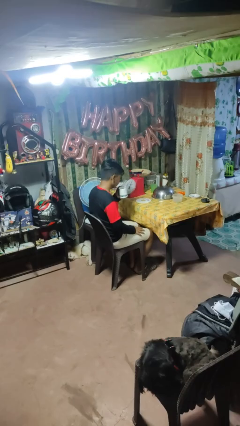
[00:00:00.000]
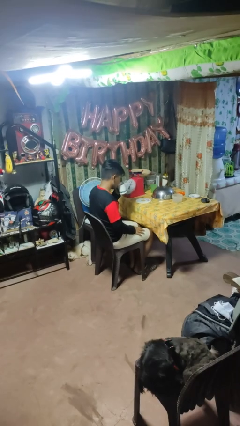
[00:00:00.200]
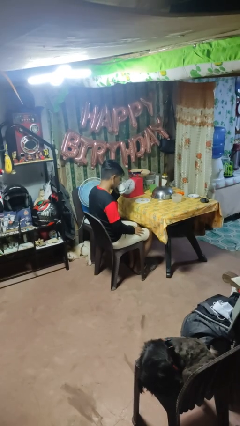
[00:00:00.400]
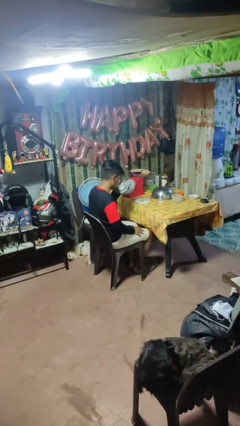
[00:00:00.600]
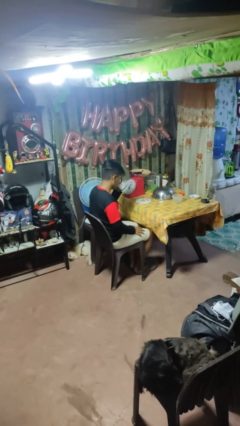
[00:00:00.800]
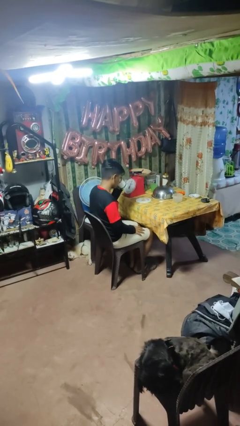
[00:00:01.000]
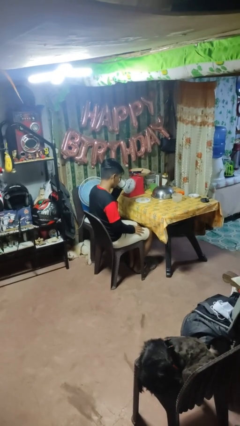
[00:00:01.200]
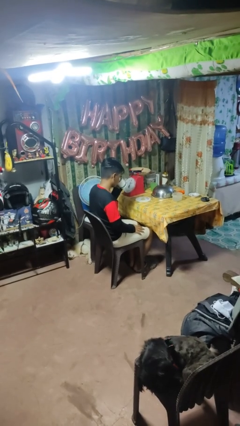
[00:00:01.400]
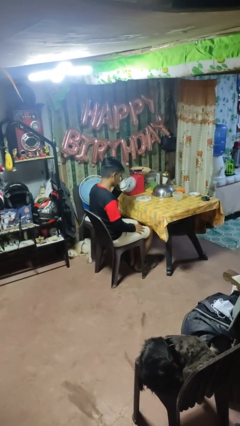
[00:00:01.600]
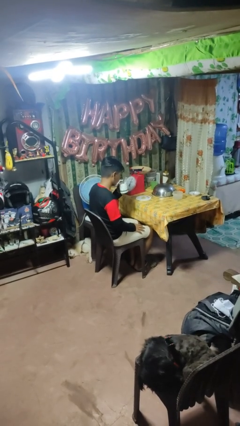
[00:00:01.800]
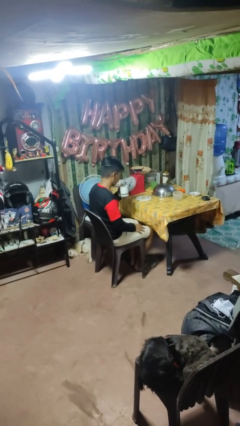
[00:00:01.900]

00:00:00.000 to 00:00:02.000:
person drinks from mug

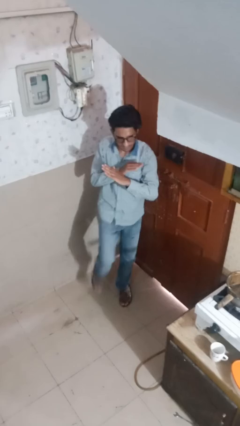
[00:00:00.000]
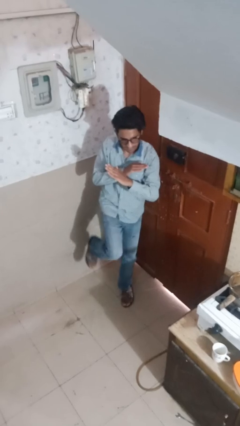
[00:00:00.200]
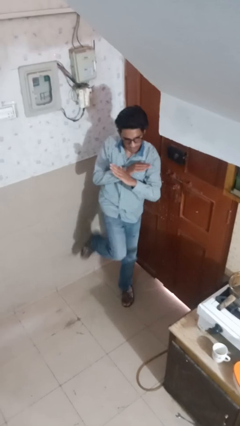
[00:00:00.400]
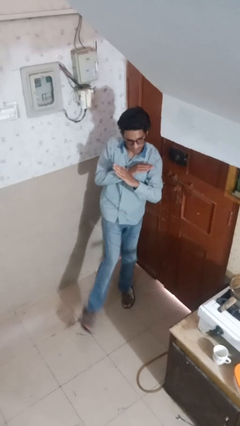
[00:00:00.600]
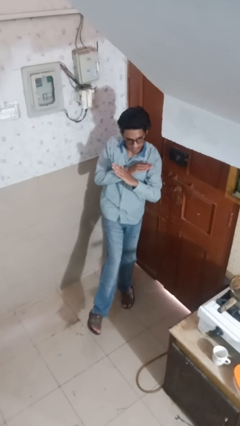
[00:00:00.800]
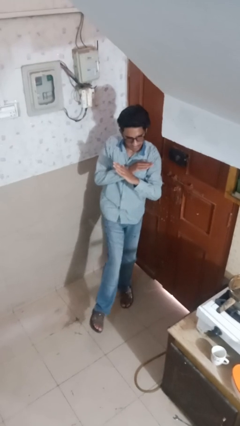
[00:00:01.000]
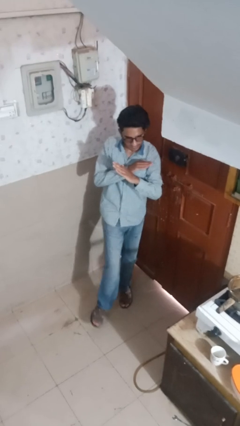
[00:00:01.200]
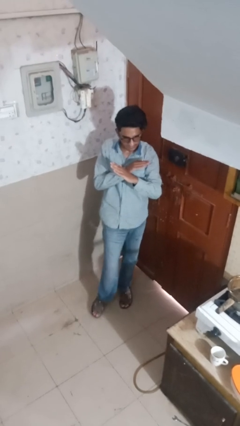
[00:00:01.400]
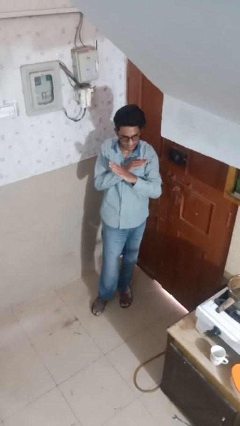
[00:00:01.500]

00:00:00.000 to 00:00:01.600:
person karate kicks

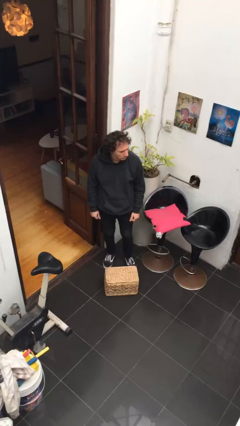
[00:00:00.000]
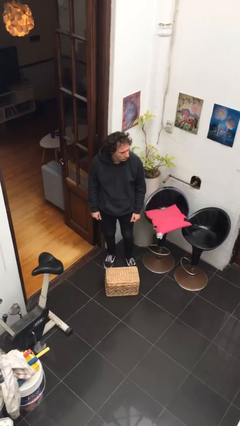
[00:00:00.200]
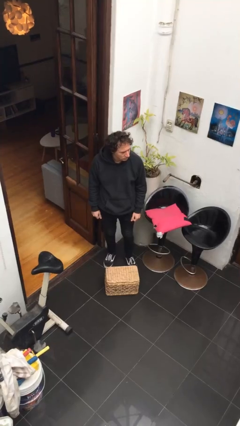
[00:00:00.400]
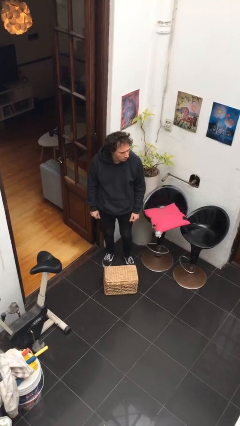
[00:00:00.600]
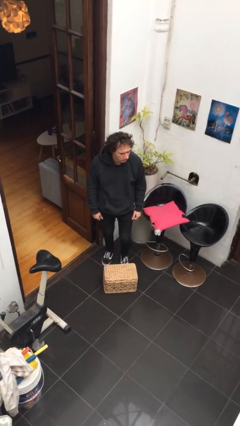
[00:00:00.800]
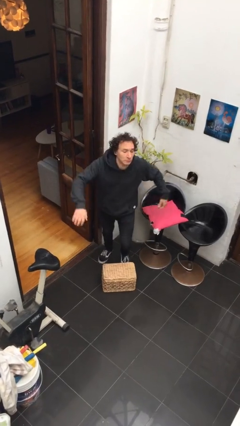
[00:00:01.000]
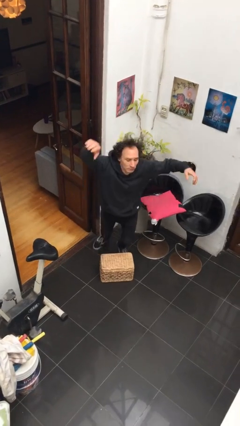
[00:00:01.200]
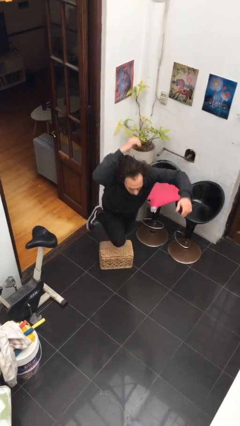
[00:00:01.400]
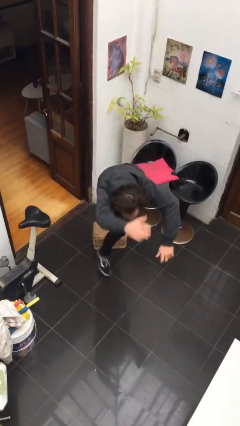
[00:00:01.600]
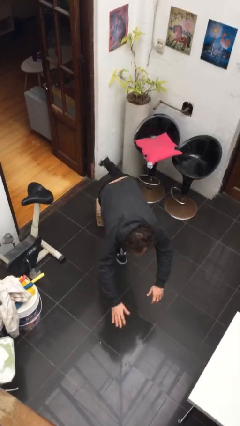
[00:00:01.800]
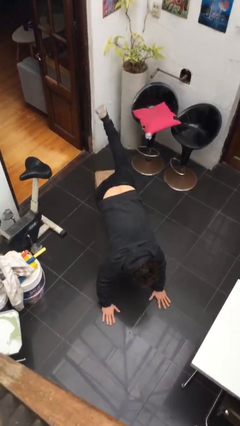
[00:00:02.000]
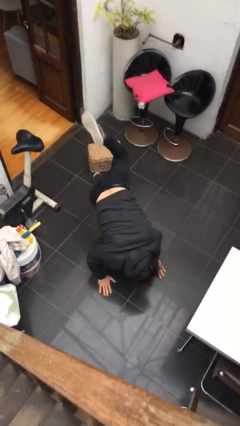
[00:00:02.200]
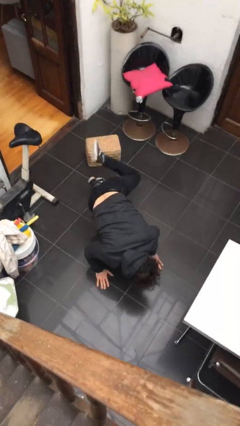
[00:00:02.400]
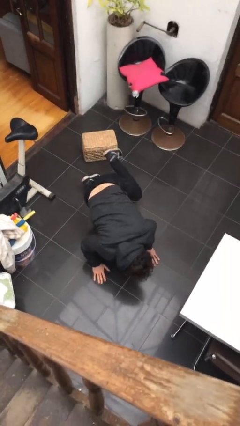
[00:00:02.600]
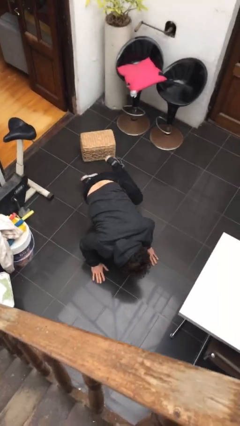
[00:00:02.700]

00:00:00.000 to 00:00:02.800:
person trips on object on floor

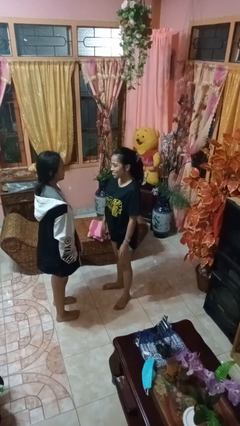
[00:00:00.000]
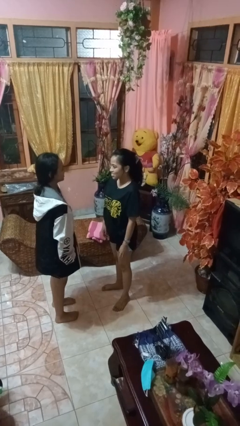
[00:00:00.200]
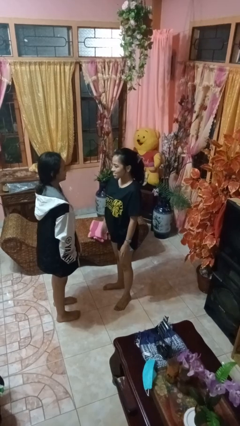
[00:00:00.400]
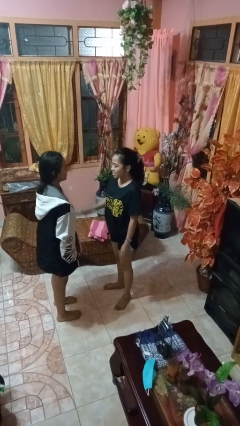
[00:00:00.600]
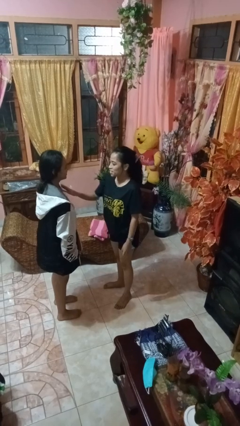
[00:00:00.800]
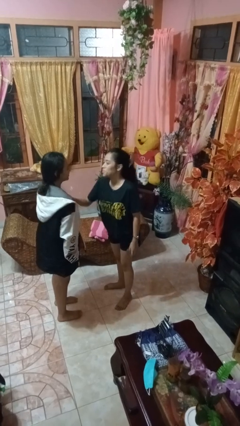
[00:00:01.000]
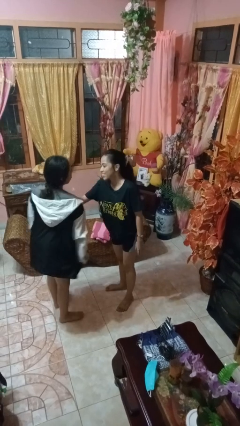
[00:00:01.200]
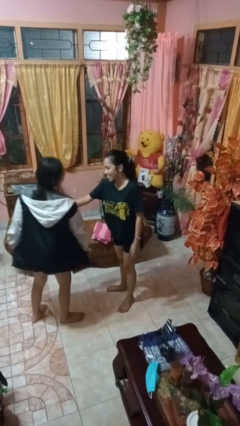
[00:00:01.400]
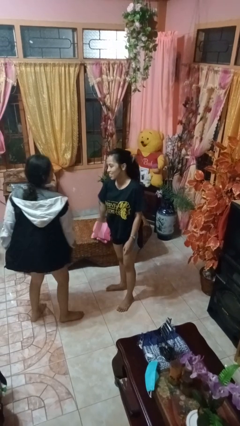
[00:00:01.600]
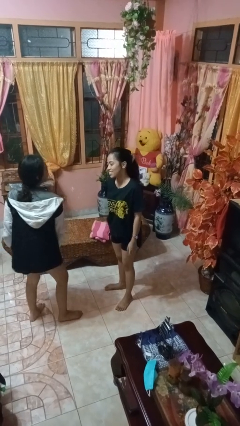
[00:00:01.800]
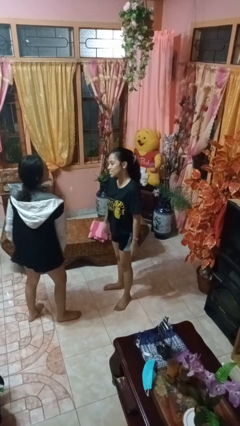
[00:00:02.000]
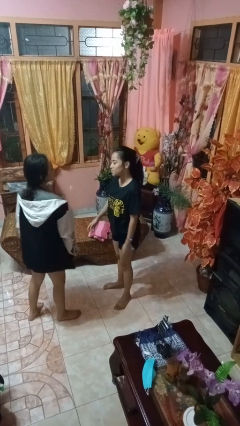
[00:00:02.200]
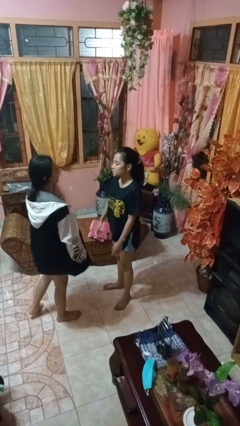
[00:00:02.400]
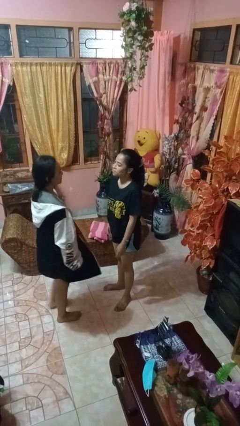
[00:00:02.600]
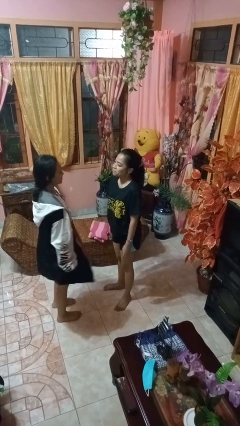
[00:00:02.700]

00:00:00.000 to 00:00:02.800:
person shoves person

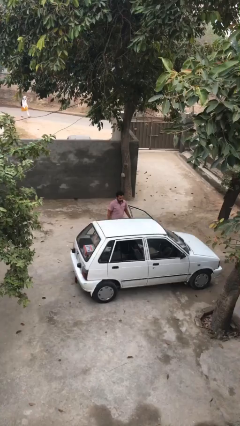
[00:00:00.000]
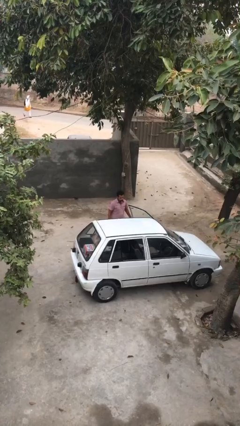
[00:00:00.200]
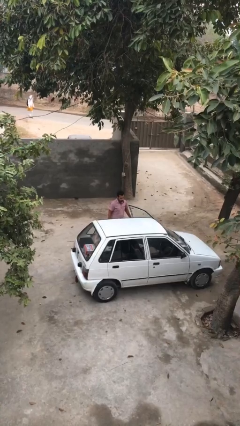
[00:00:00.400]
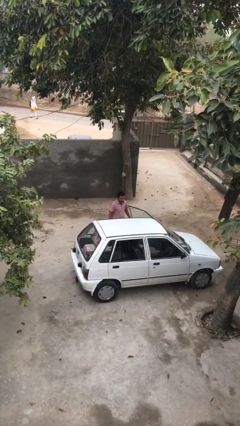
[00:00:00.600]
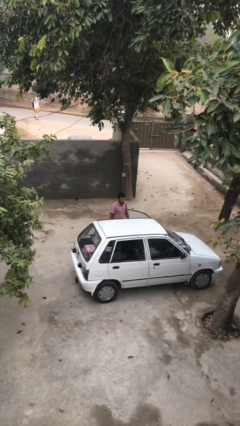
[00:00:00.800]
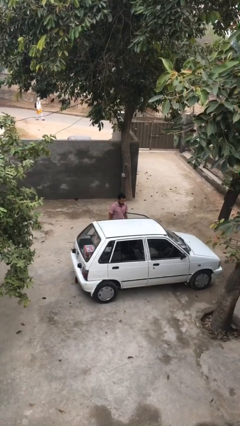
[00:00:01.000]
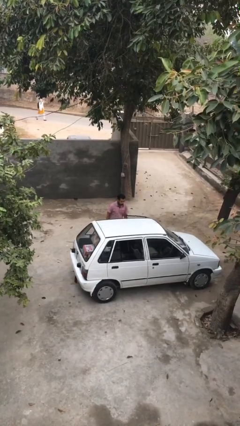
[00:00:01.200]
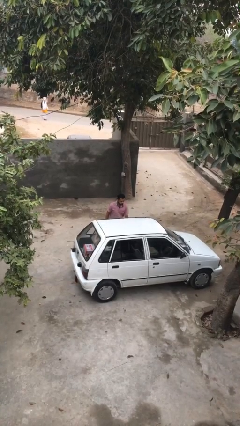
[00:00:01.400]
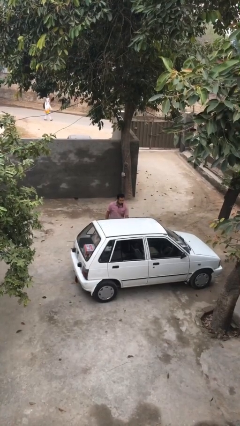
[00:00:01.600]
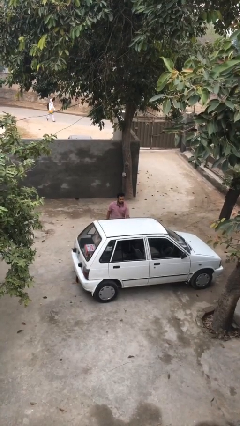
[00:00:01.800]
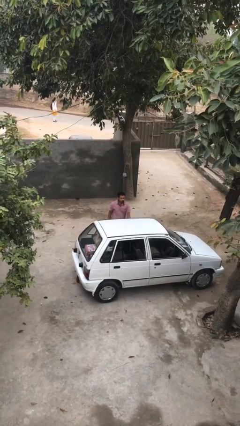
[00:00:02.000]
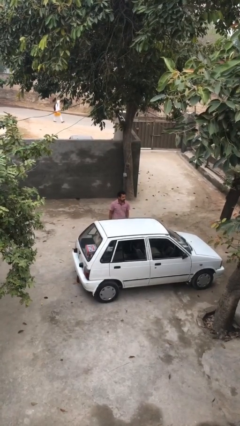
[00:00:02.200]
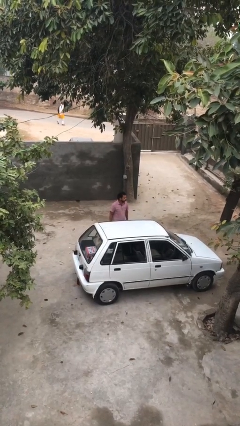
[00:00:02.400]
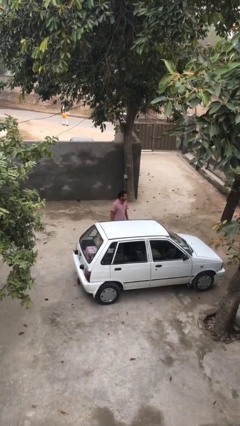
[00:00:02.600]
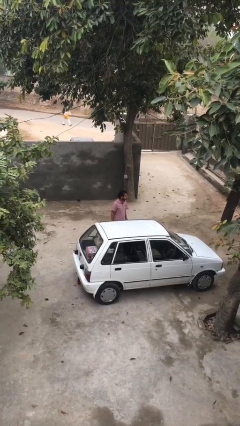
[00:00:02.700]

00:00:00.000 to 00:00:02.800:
person closes car door

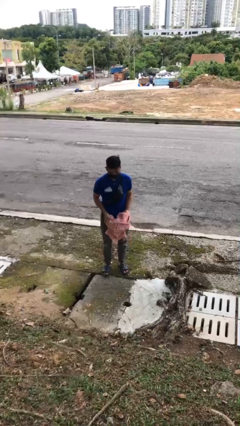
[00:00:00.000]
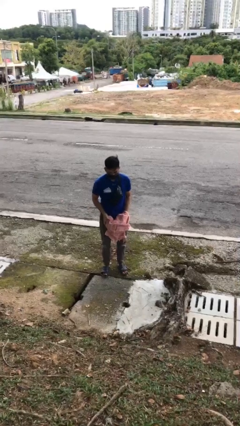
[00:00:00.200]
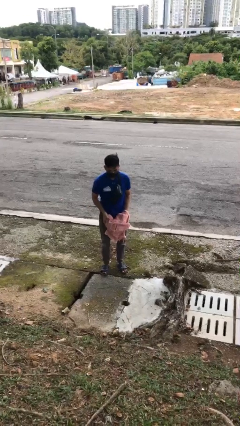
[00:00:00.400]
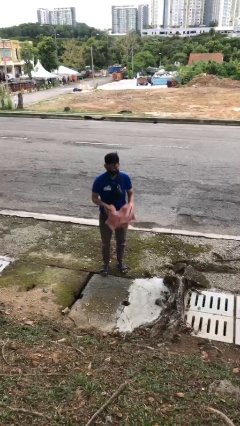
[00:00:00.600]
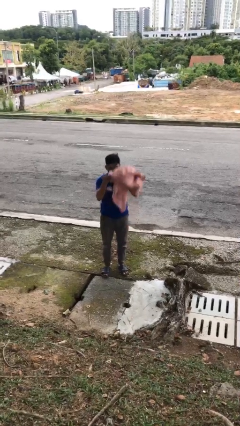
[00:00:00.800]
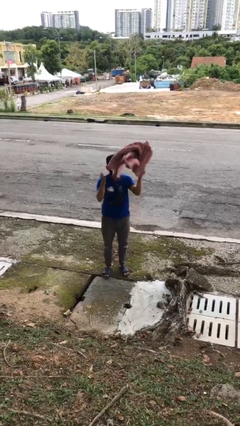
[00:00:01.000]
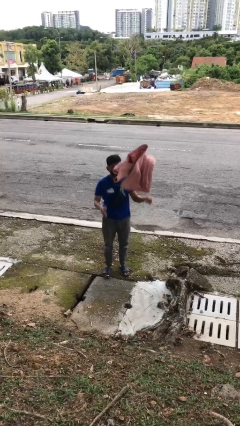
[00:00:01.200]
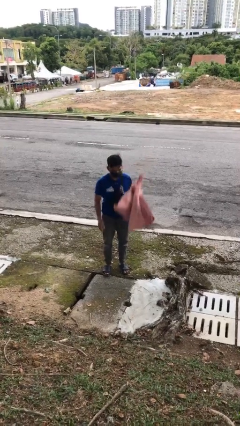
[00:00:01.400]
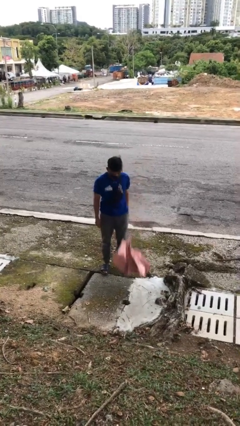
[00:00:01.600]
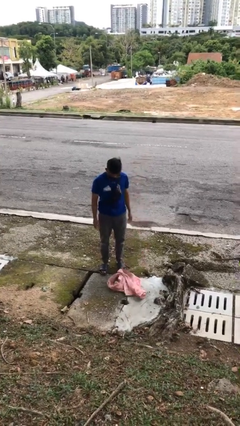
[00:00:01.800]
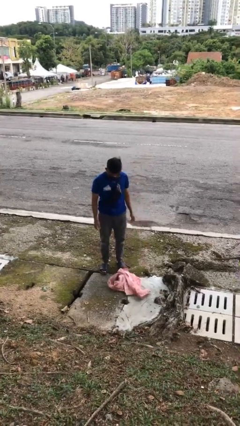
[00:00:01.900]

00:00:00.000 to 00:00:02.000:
person throws object into air

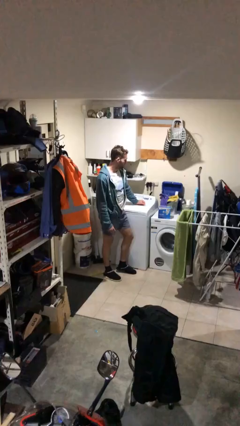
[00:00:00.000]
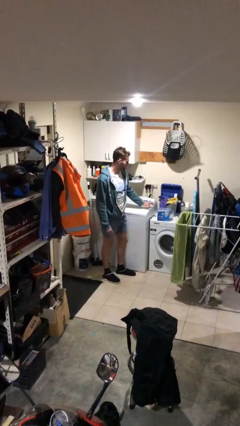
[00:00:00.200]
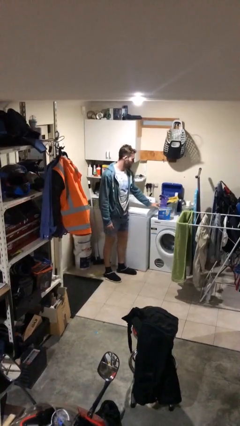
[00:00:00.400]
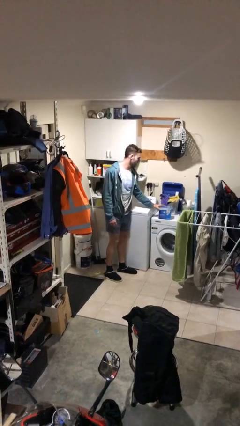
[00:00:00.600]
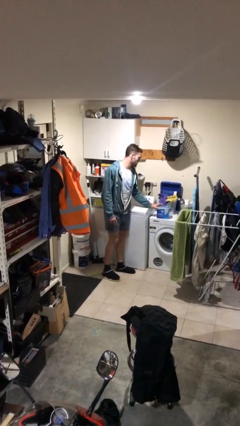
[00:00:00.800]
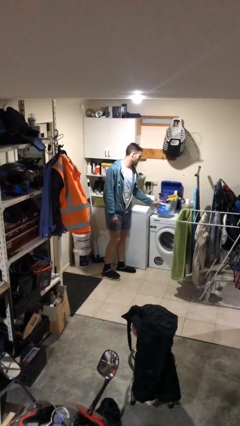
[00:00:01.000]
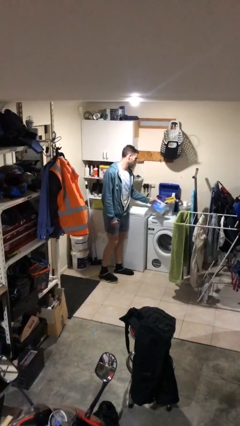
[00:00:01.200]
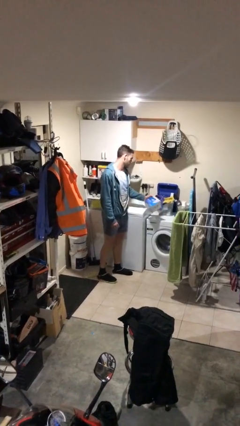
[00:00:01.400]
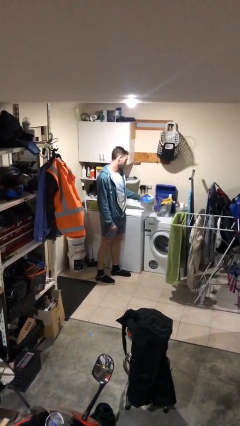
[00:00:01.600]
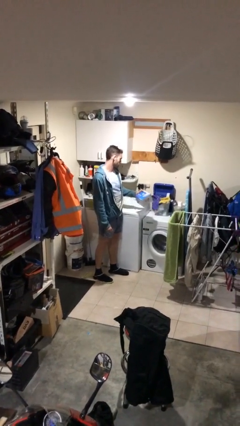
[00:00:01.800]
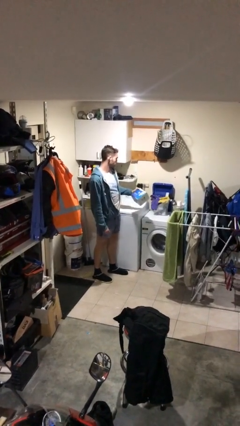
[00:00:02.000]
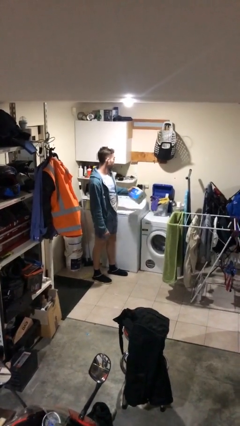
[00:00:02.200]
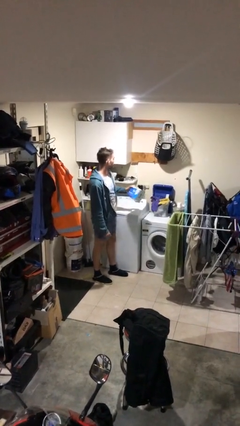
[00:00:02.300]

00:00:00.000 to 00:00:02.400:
person picks up object from table

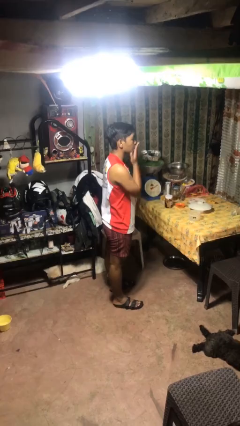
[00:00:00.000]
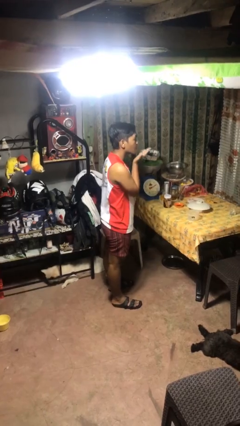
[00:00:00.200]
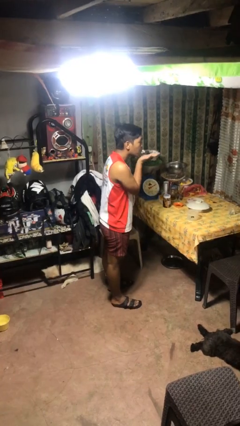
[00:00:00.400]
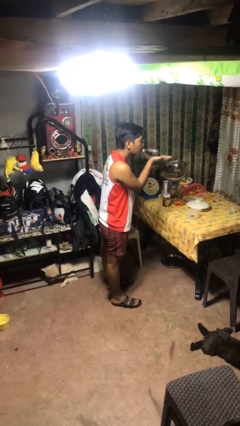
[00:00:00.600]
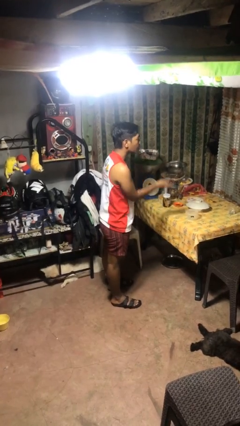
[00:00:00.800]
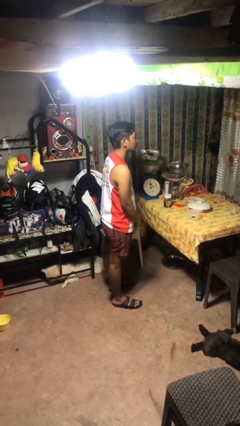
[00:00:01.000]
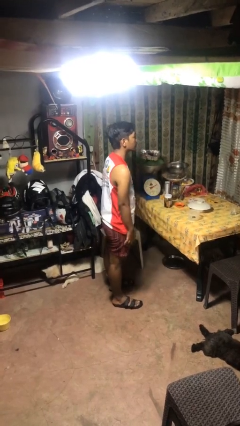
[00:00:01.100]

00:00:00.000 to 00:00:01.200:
person gestures blow kiss
